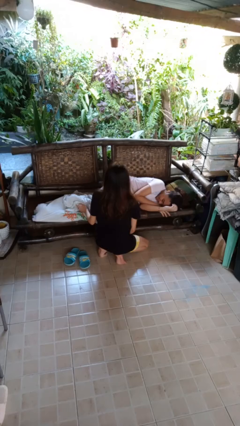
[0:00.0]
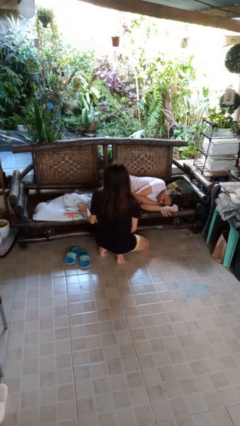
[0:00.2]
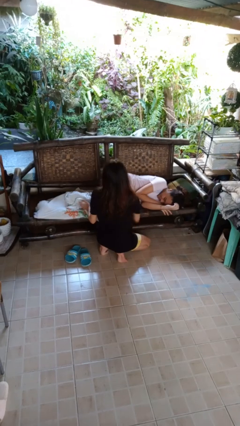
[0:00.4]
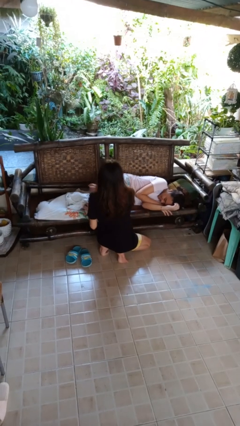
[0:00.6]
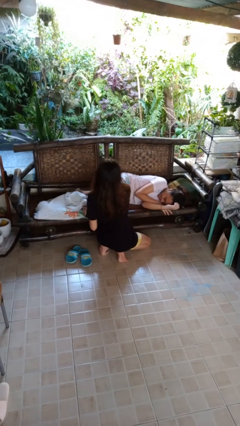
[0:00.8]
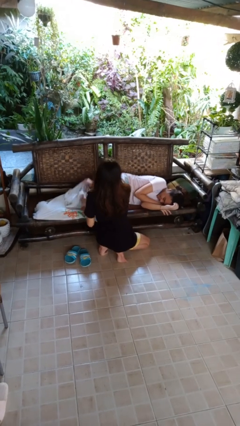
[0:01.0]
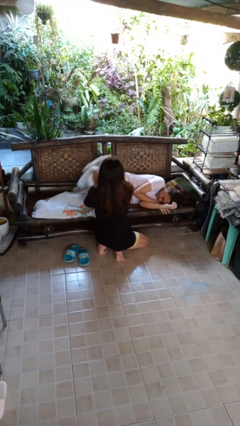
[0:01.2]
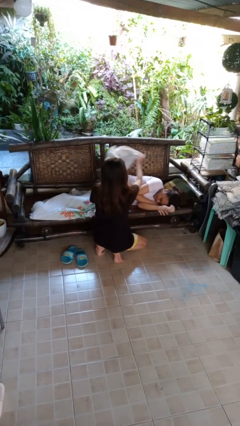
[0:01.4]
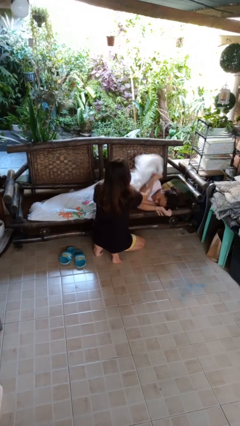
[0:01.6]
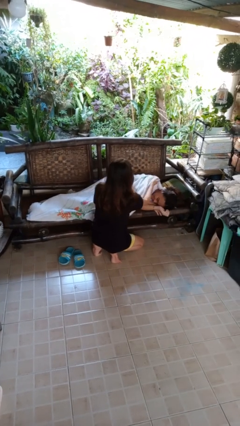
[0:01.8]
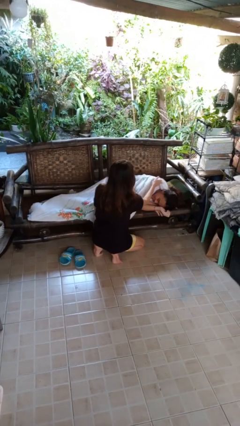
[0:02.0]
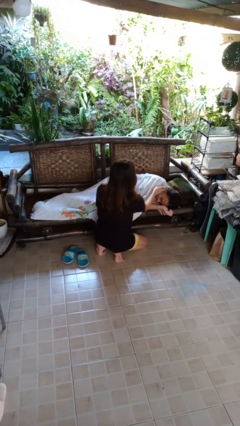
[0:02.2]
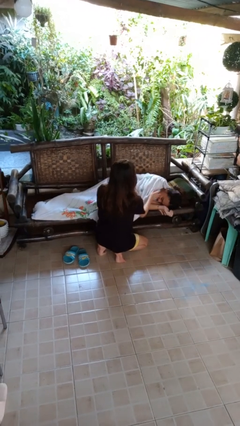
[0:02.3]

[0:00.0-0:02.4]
person covers friend with blanket

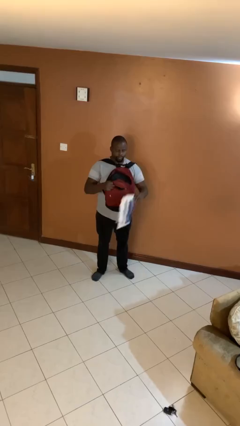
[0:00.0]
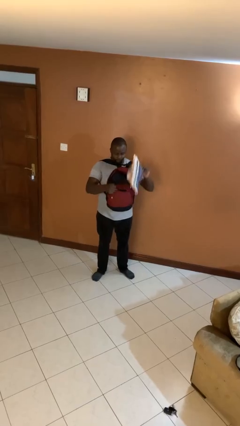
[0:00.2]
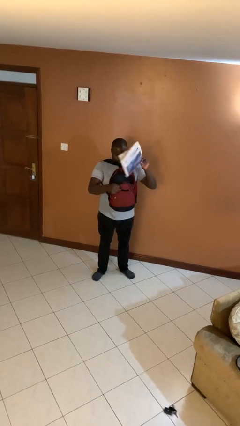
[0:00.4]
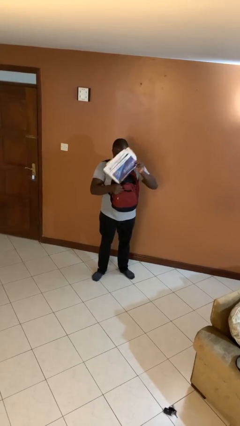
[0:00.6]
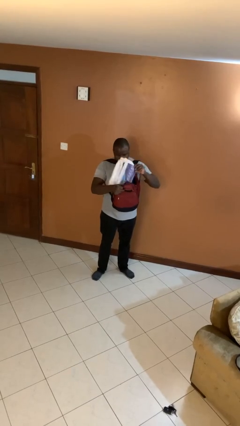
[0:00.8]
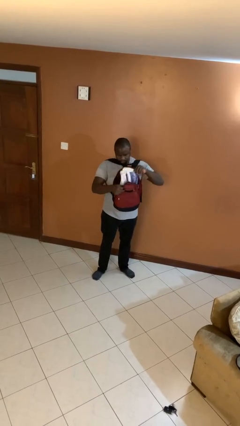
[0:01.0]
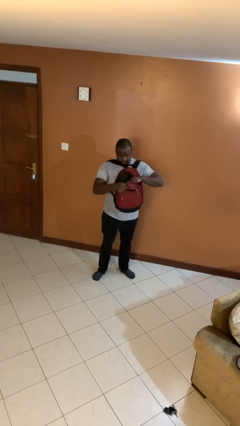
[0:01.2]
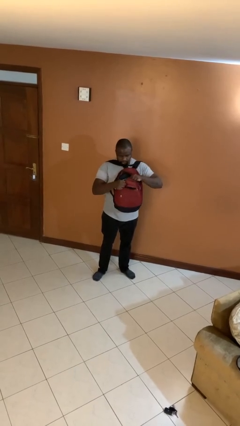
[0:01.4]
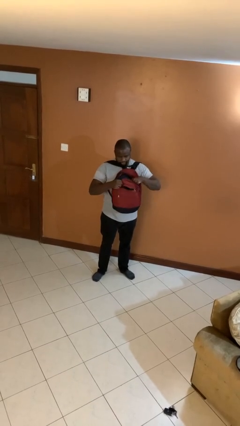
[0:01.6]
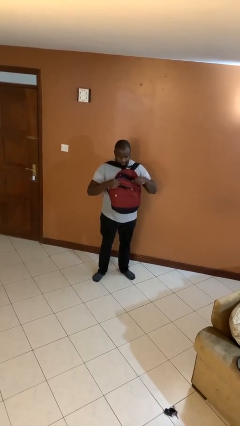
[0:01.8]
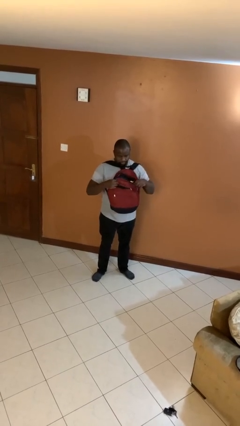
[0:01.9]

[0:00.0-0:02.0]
person puts object into backpack

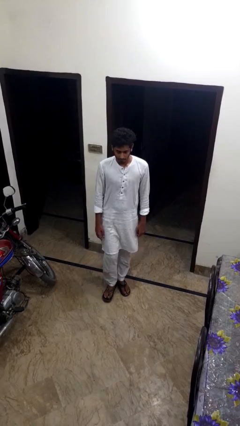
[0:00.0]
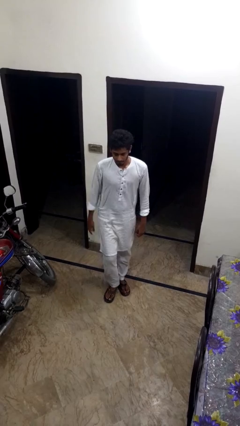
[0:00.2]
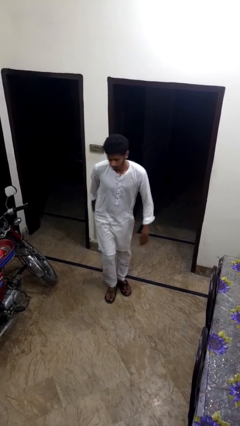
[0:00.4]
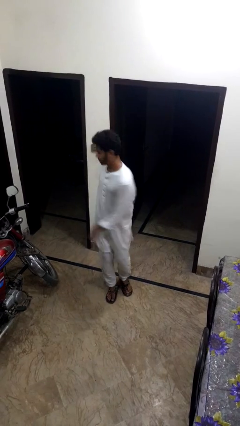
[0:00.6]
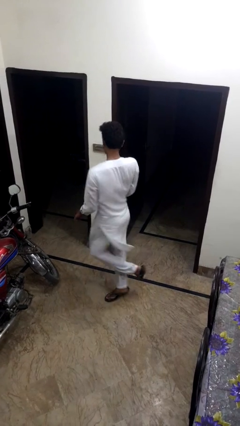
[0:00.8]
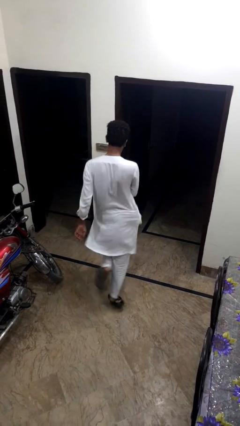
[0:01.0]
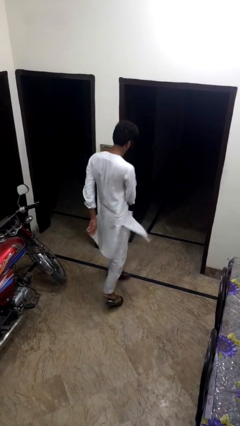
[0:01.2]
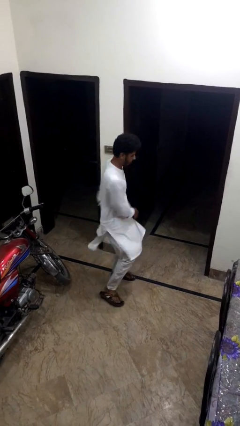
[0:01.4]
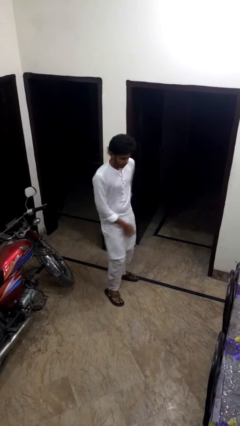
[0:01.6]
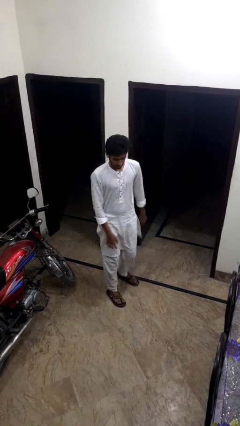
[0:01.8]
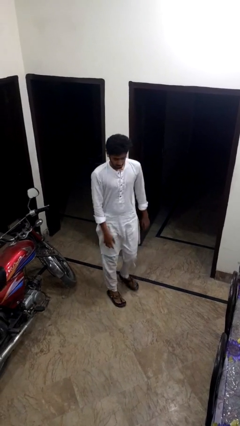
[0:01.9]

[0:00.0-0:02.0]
person twirls

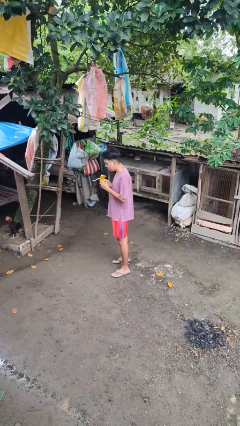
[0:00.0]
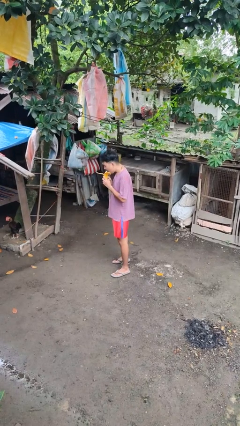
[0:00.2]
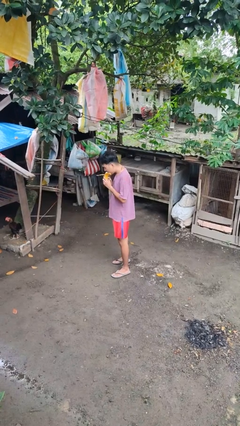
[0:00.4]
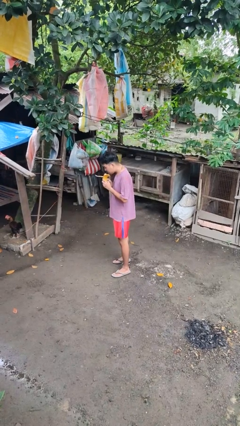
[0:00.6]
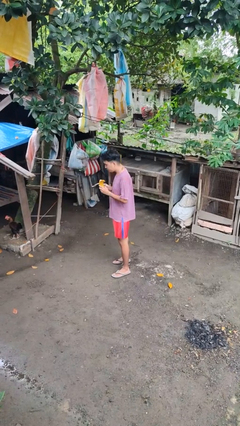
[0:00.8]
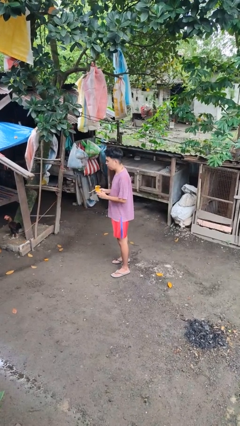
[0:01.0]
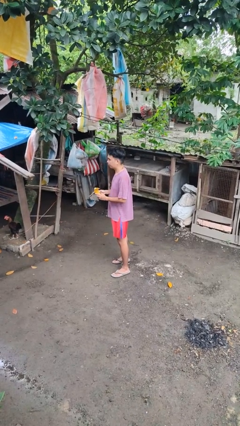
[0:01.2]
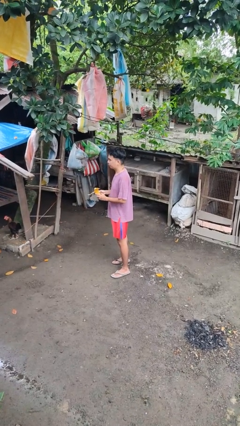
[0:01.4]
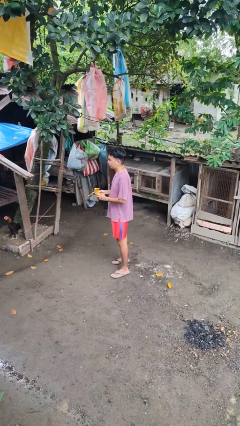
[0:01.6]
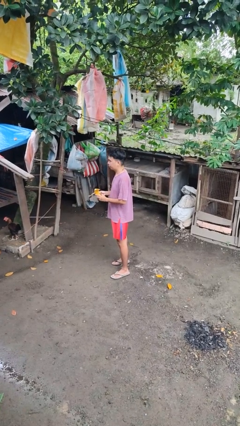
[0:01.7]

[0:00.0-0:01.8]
person eats banana

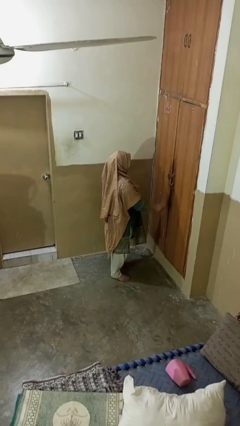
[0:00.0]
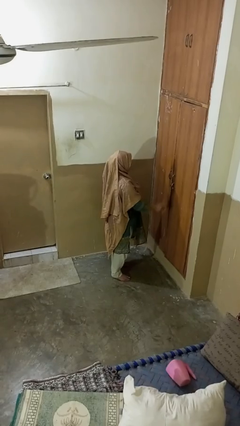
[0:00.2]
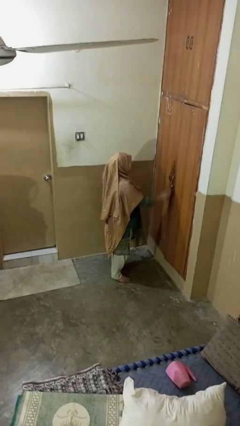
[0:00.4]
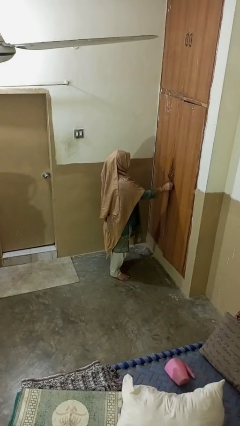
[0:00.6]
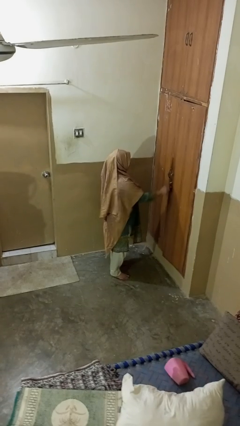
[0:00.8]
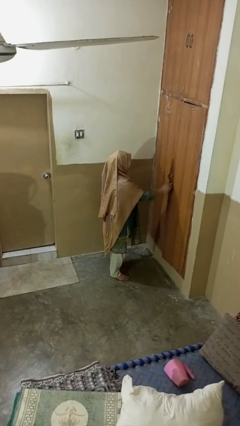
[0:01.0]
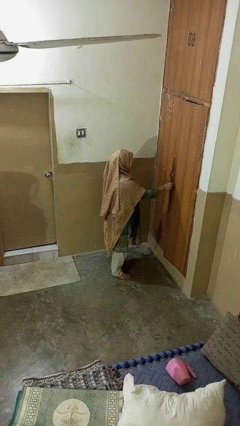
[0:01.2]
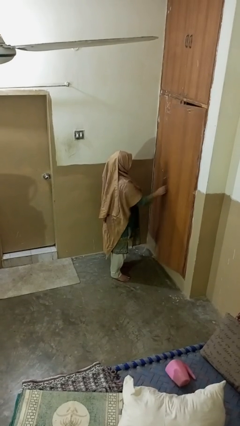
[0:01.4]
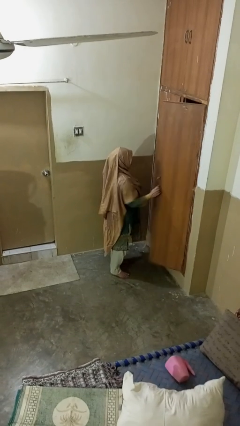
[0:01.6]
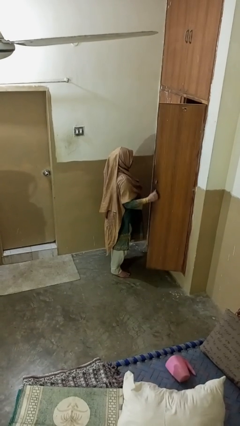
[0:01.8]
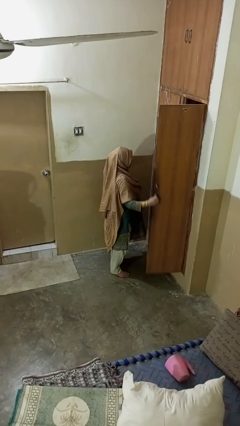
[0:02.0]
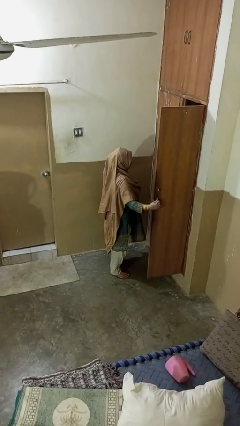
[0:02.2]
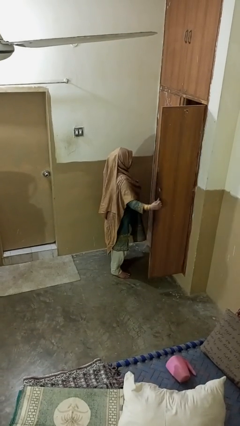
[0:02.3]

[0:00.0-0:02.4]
person opens closet door

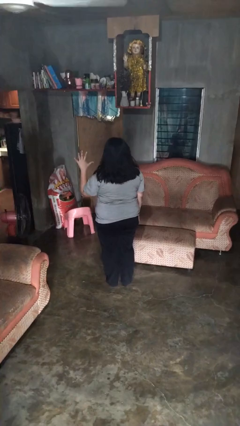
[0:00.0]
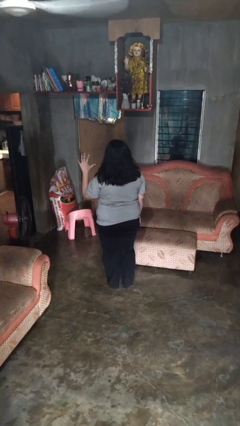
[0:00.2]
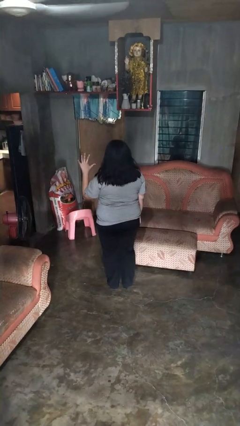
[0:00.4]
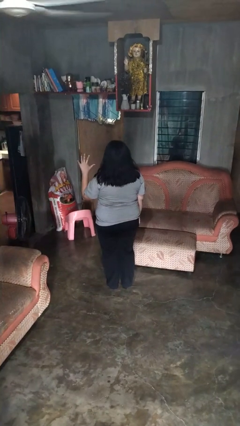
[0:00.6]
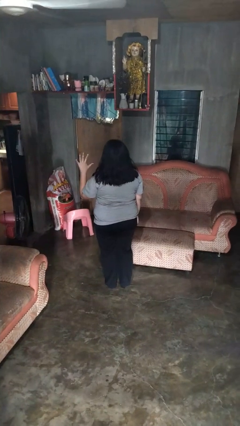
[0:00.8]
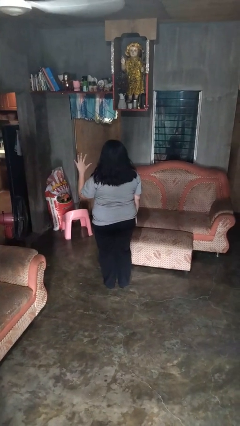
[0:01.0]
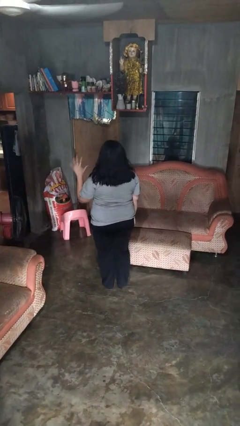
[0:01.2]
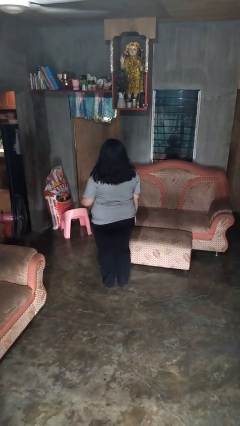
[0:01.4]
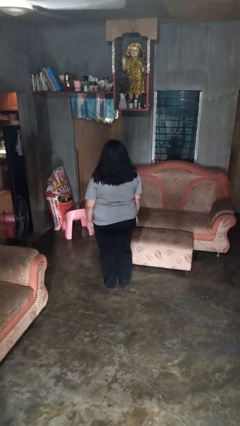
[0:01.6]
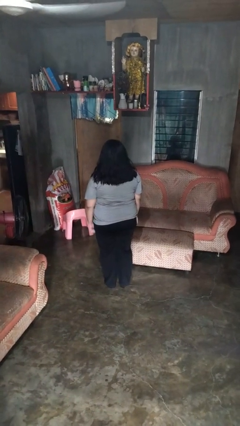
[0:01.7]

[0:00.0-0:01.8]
person gestures number five

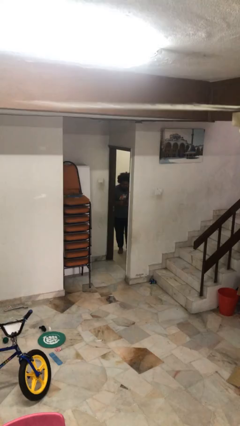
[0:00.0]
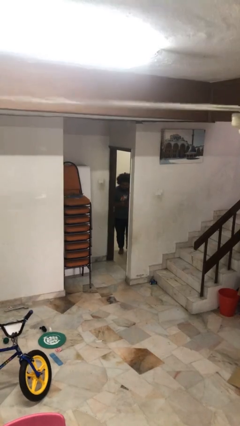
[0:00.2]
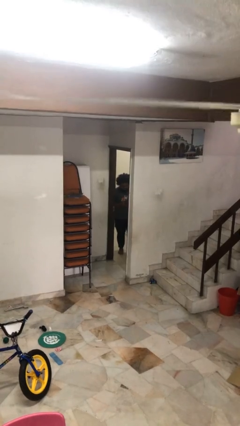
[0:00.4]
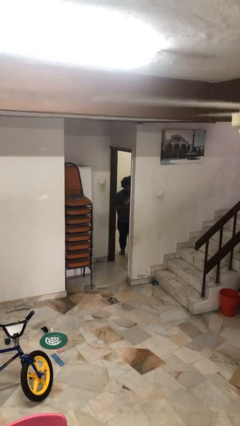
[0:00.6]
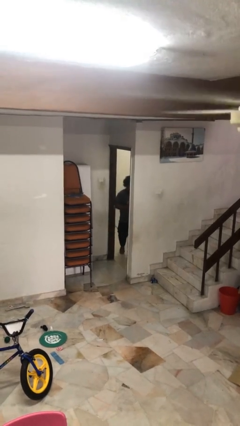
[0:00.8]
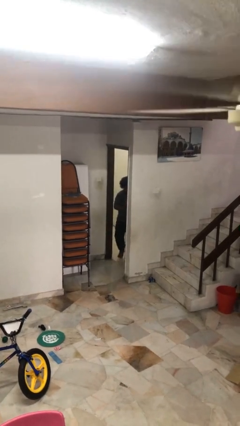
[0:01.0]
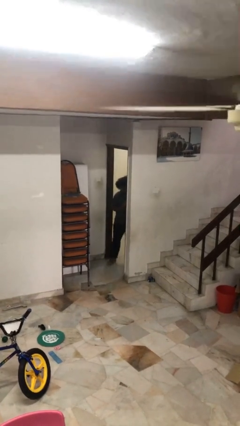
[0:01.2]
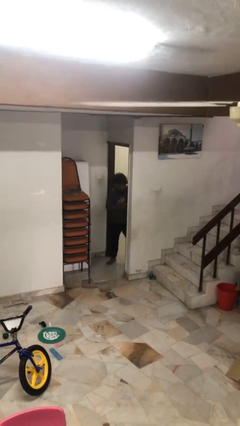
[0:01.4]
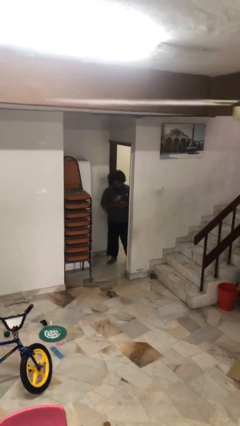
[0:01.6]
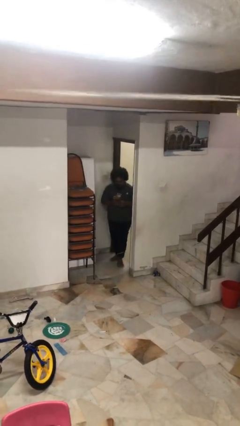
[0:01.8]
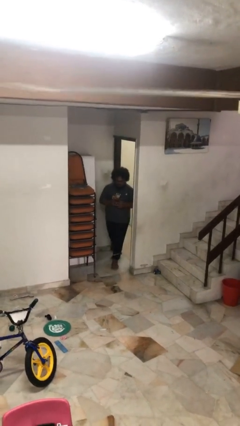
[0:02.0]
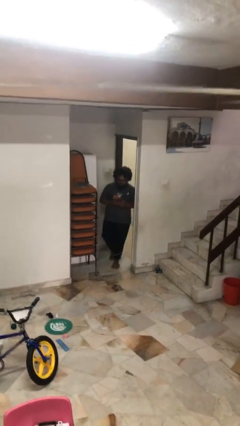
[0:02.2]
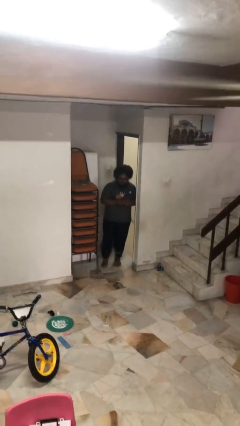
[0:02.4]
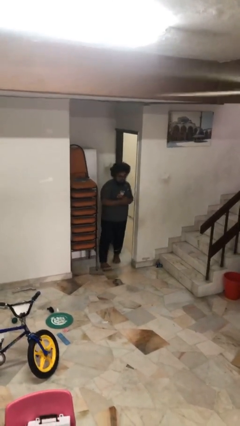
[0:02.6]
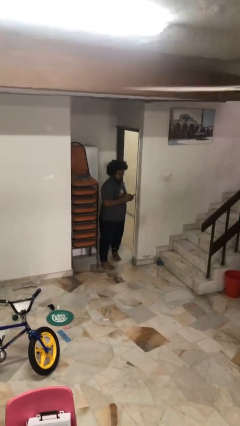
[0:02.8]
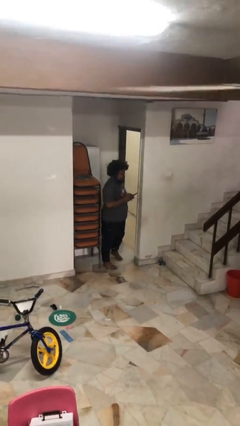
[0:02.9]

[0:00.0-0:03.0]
person enters scene through structure

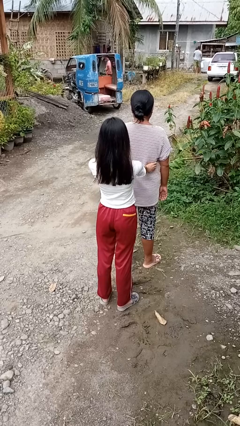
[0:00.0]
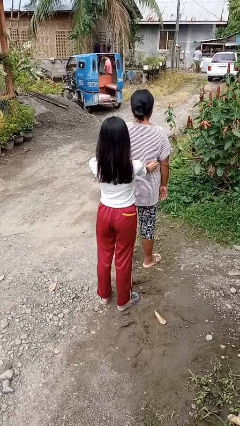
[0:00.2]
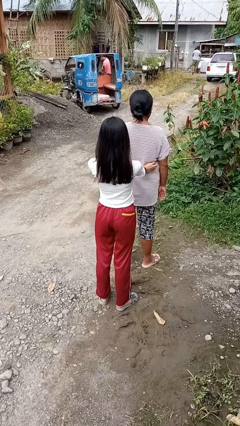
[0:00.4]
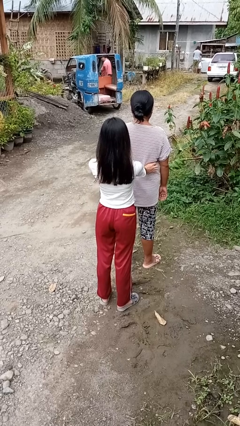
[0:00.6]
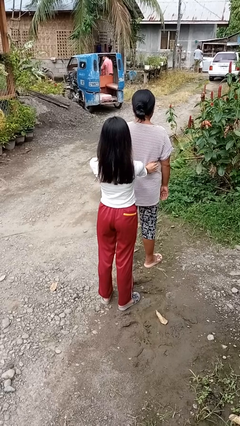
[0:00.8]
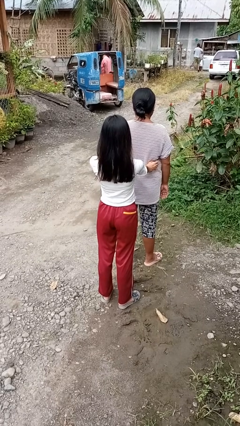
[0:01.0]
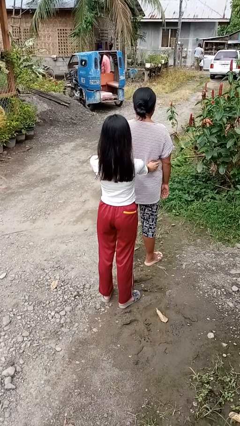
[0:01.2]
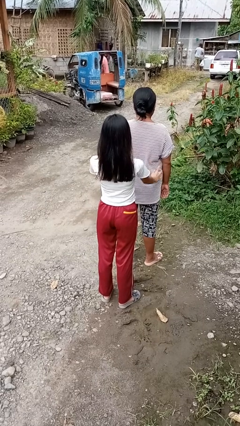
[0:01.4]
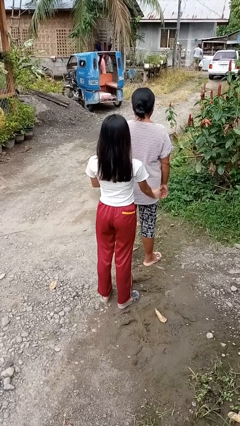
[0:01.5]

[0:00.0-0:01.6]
person tickles person
